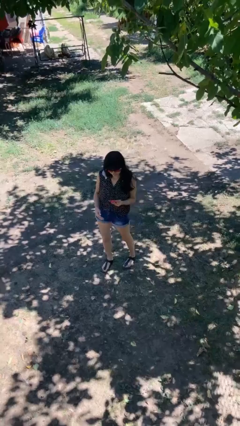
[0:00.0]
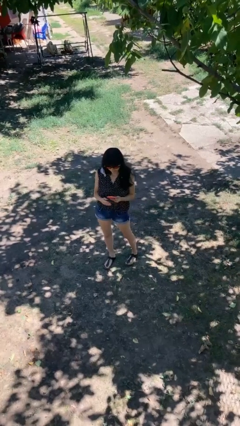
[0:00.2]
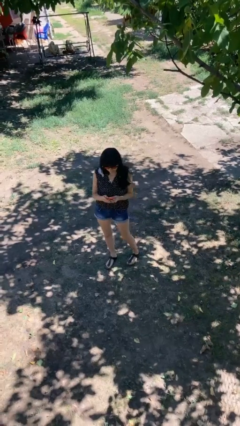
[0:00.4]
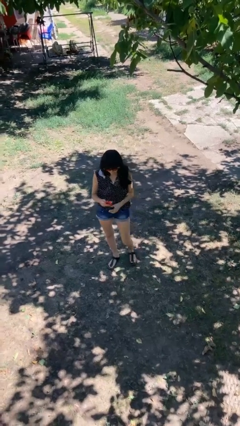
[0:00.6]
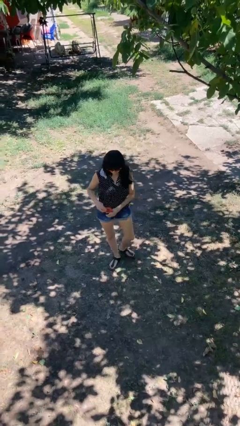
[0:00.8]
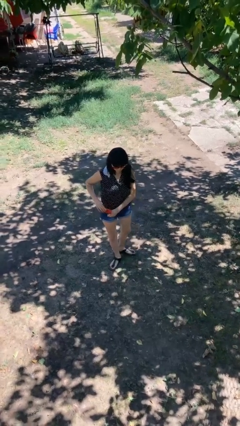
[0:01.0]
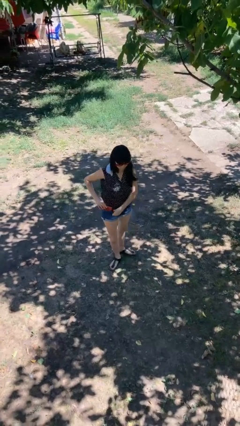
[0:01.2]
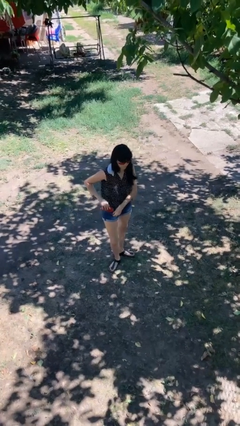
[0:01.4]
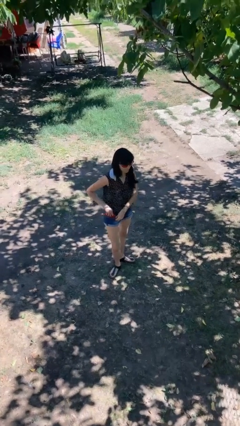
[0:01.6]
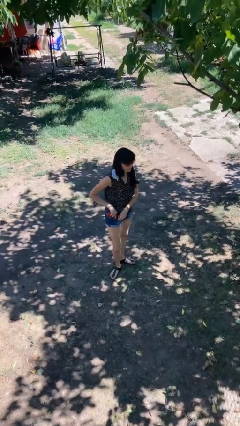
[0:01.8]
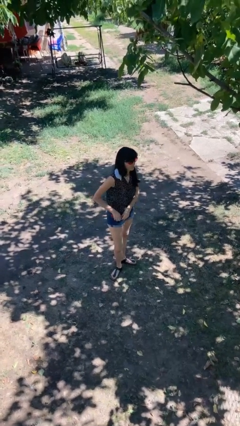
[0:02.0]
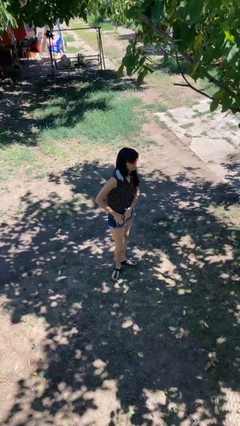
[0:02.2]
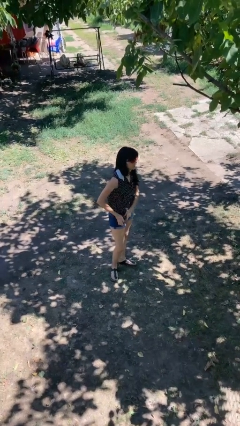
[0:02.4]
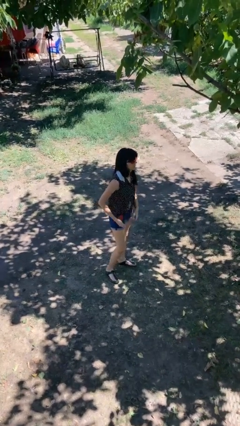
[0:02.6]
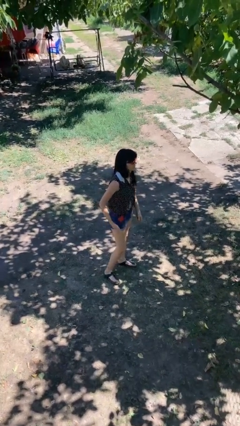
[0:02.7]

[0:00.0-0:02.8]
person puts phone into pocket

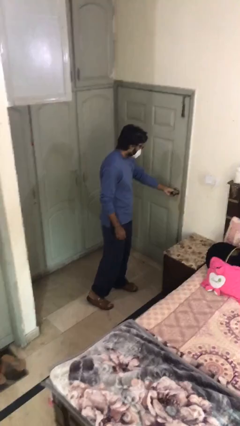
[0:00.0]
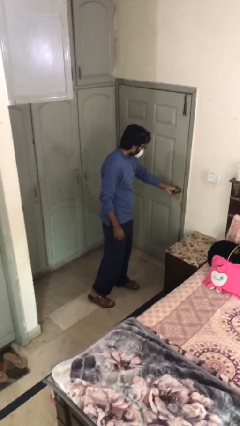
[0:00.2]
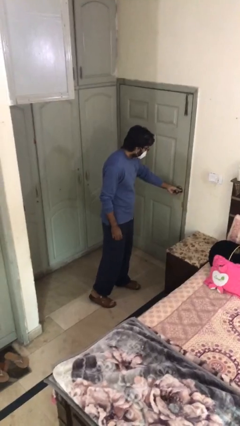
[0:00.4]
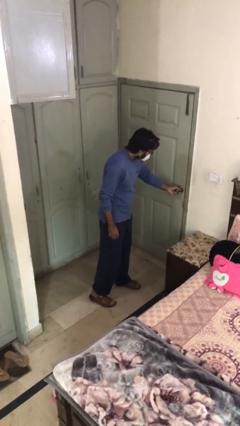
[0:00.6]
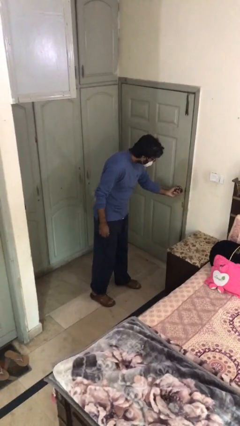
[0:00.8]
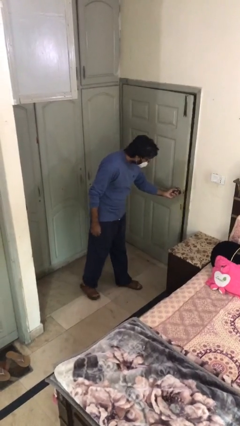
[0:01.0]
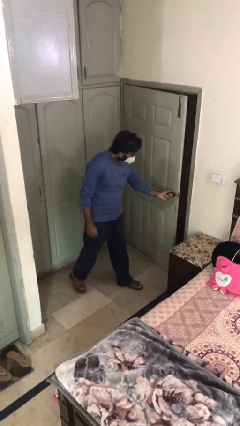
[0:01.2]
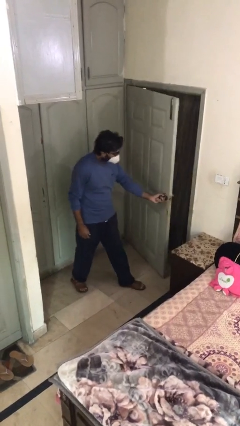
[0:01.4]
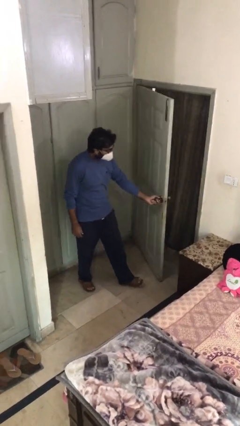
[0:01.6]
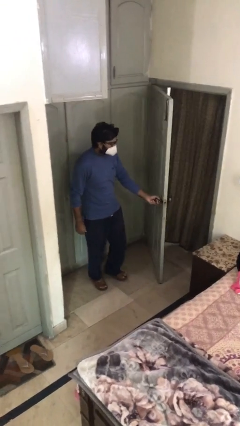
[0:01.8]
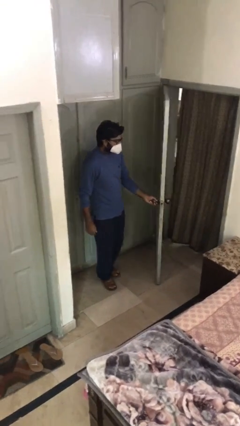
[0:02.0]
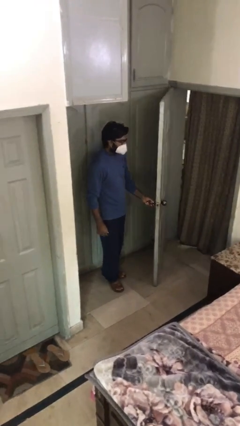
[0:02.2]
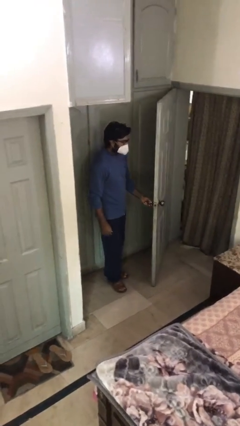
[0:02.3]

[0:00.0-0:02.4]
person opens facility door

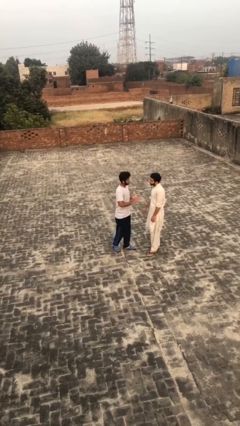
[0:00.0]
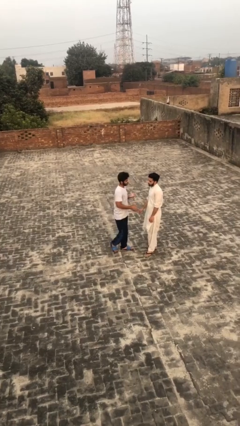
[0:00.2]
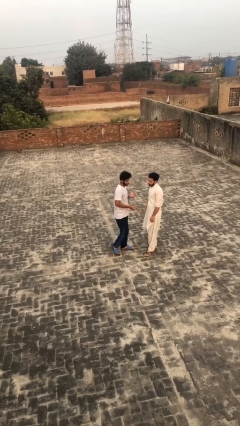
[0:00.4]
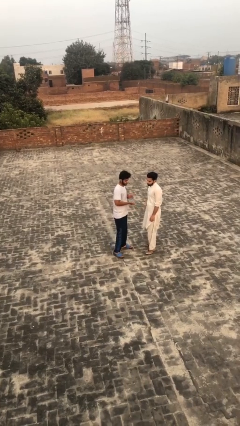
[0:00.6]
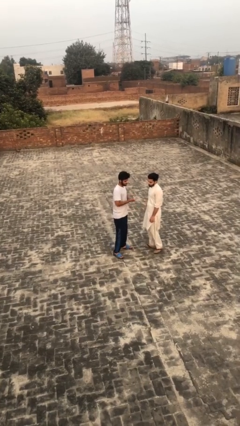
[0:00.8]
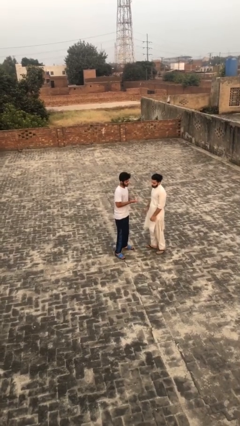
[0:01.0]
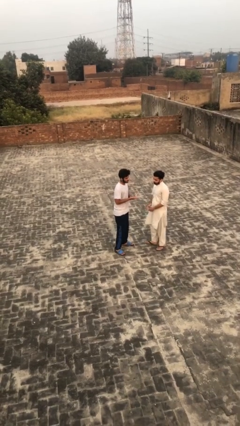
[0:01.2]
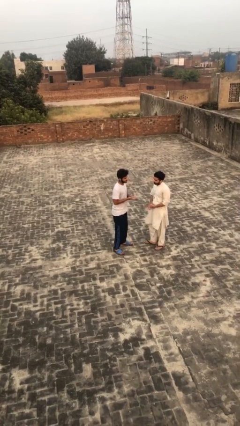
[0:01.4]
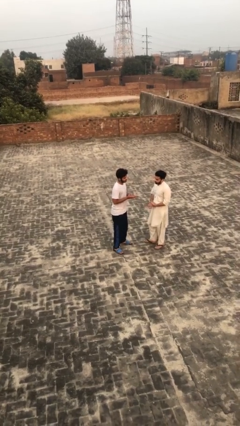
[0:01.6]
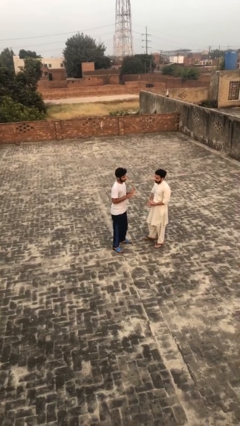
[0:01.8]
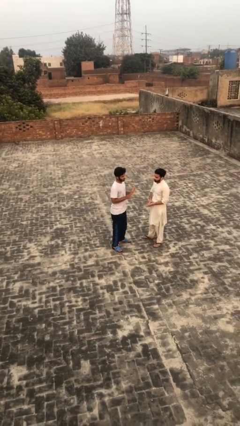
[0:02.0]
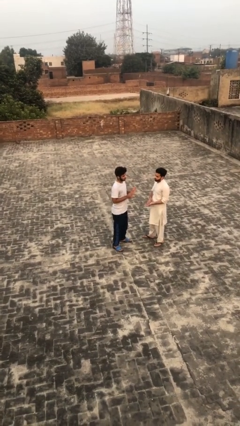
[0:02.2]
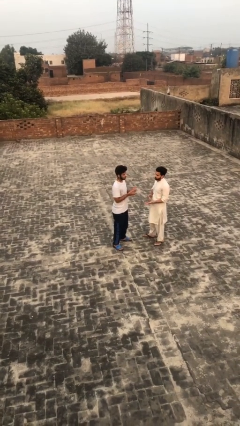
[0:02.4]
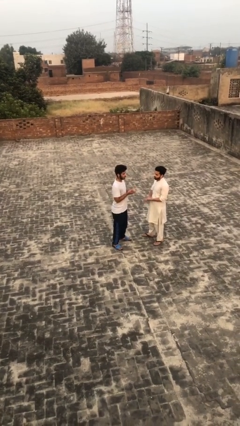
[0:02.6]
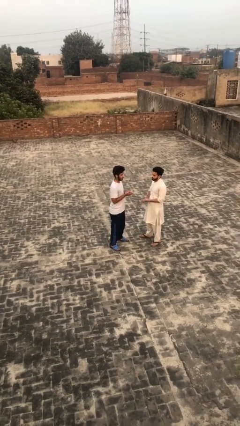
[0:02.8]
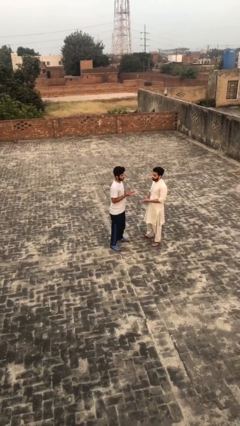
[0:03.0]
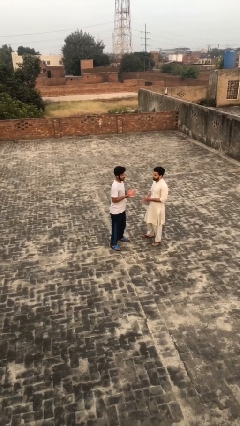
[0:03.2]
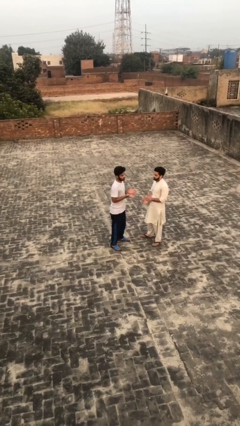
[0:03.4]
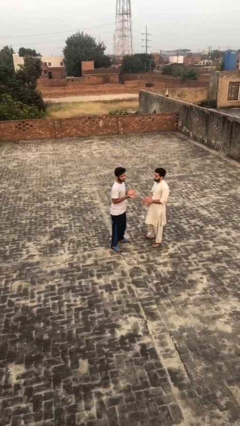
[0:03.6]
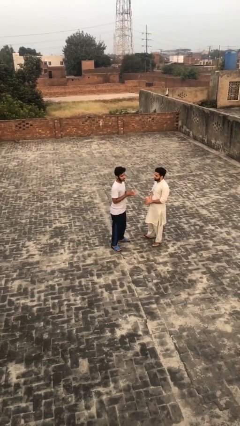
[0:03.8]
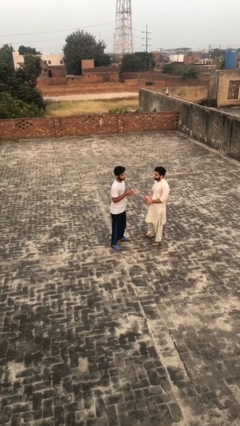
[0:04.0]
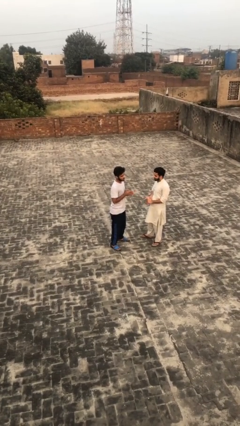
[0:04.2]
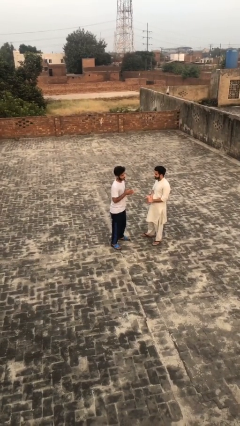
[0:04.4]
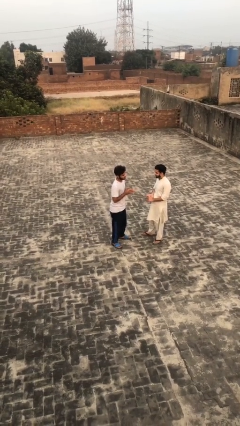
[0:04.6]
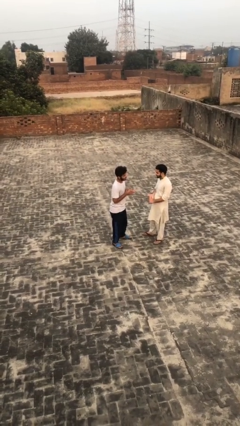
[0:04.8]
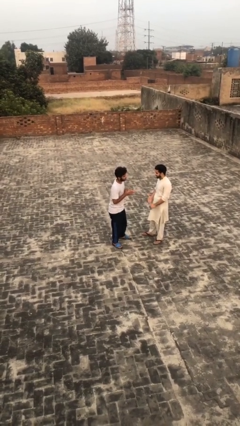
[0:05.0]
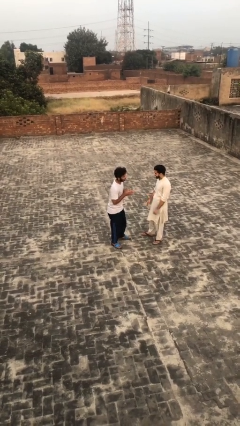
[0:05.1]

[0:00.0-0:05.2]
person talks to person

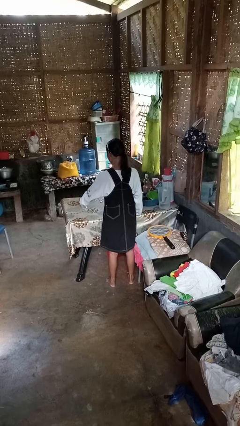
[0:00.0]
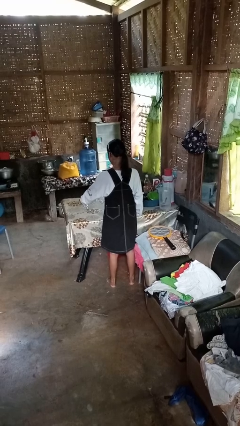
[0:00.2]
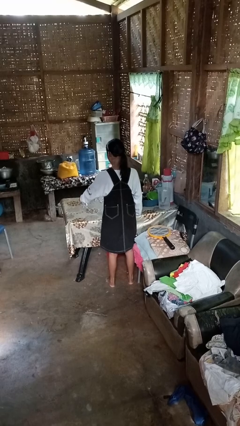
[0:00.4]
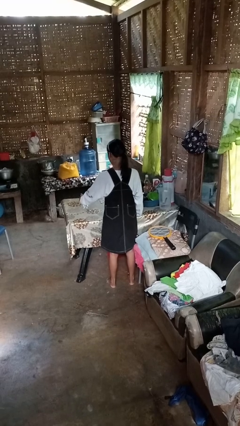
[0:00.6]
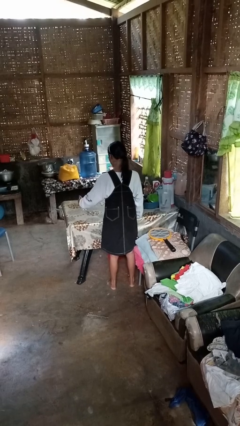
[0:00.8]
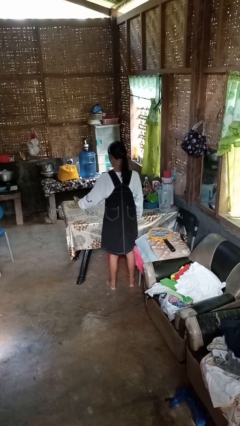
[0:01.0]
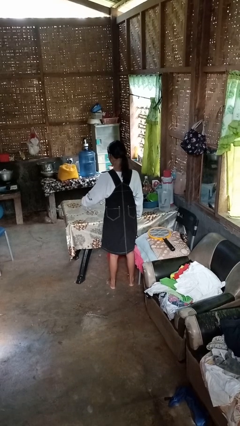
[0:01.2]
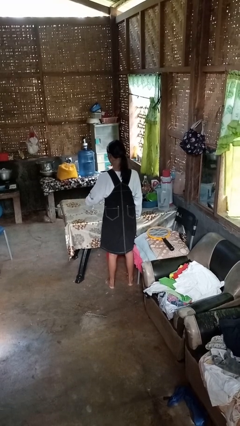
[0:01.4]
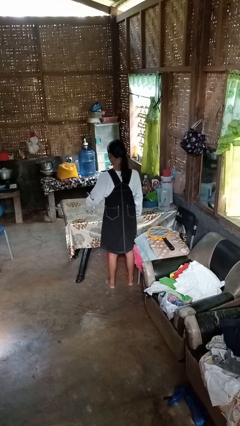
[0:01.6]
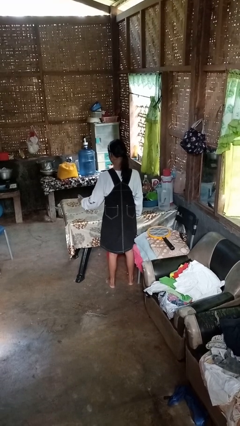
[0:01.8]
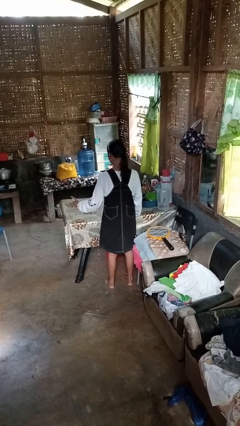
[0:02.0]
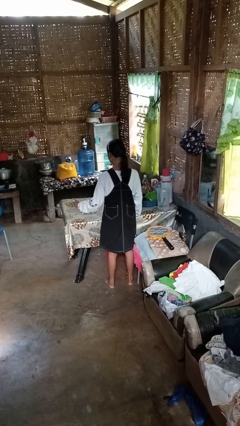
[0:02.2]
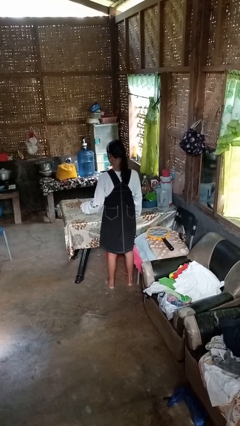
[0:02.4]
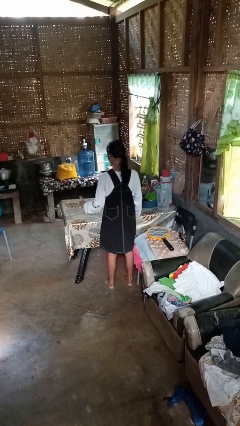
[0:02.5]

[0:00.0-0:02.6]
person sprays from bottle

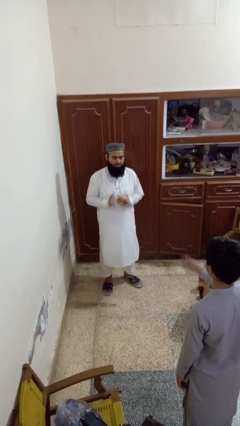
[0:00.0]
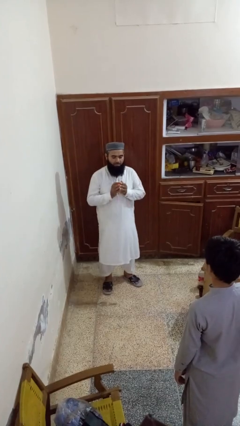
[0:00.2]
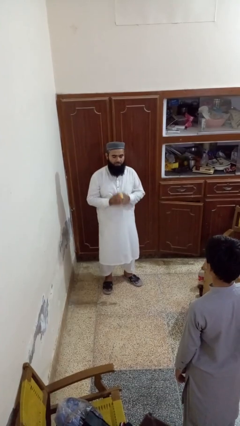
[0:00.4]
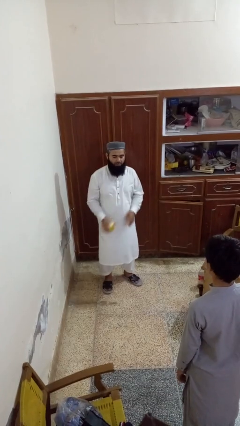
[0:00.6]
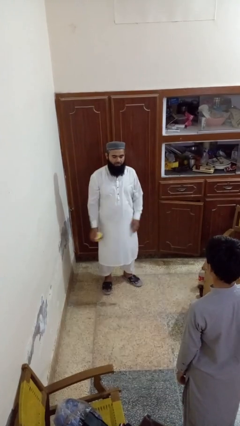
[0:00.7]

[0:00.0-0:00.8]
person catches object from person

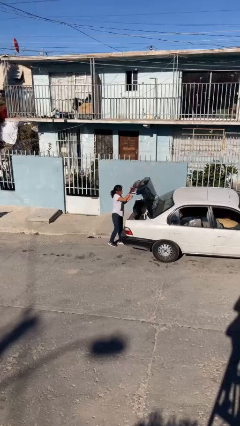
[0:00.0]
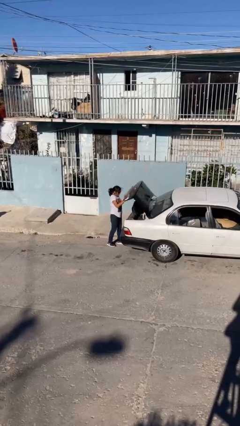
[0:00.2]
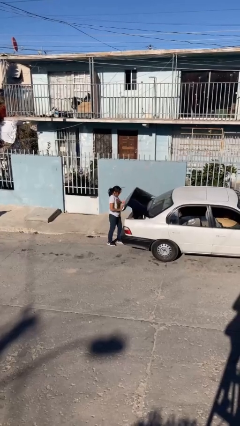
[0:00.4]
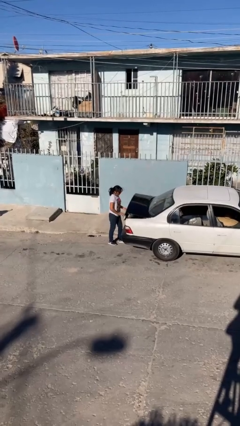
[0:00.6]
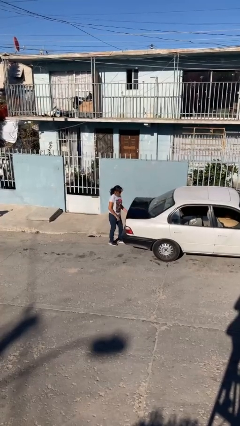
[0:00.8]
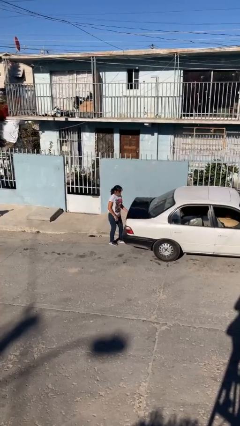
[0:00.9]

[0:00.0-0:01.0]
person closes car trunk

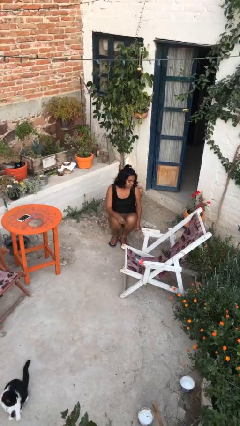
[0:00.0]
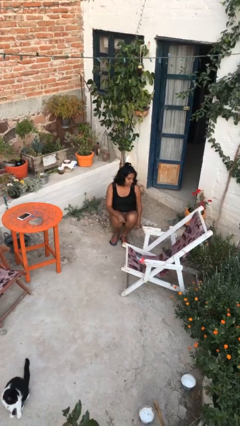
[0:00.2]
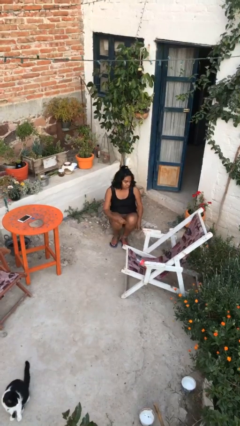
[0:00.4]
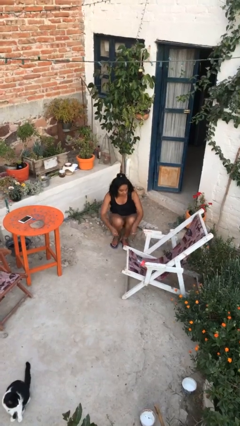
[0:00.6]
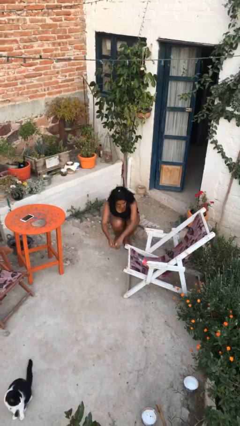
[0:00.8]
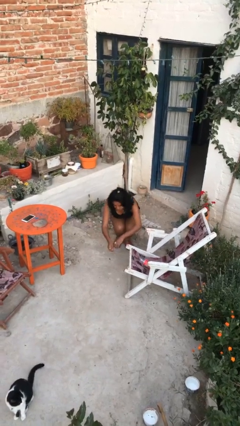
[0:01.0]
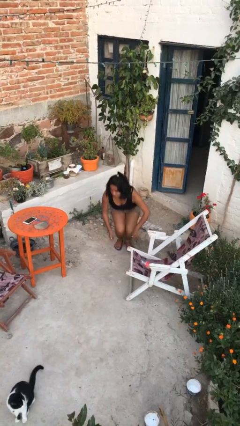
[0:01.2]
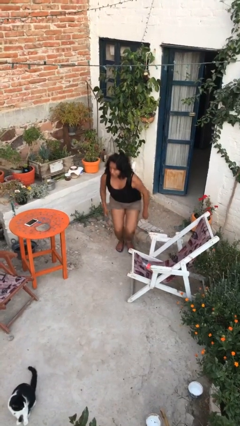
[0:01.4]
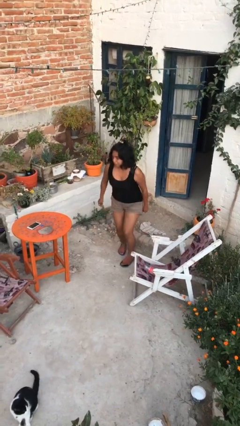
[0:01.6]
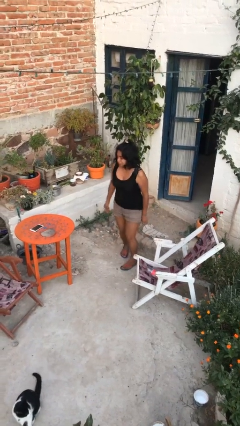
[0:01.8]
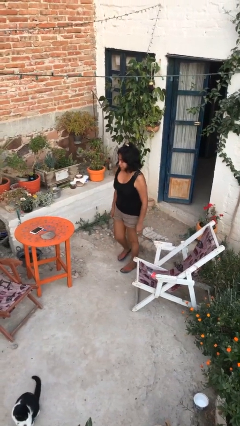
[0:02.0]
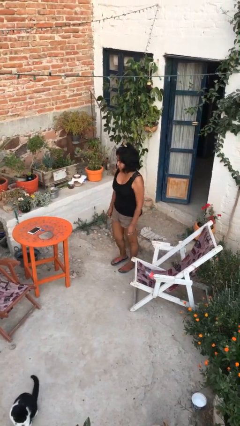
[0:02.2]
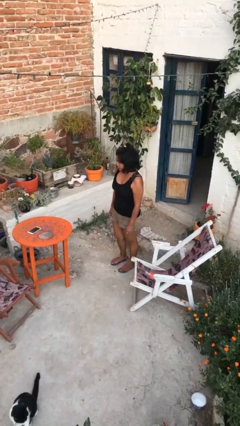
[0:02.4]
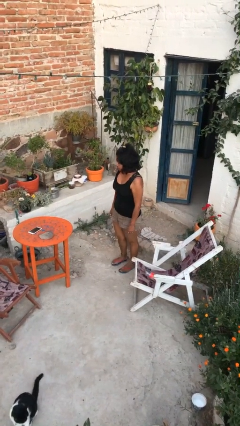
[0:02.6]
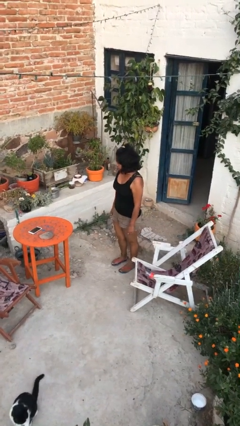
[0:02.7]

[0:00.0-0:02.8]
person stands up
